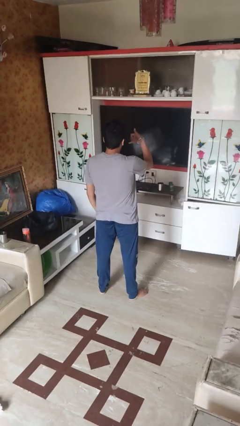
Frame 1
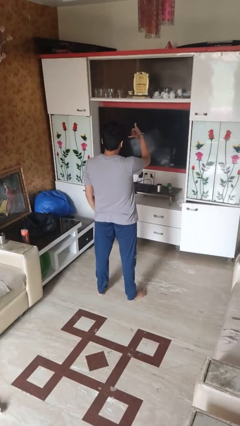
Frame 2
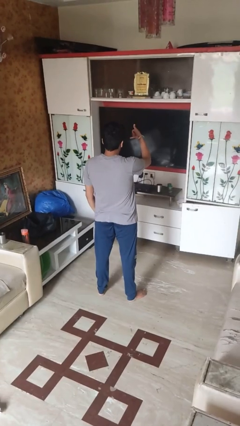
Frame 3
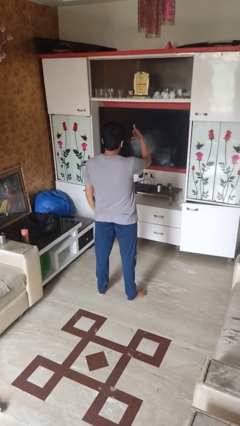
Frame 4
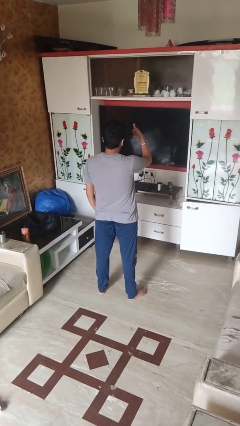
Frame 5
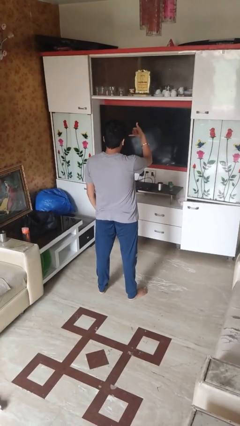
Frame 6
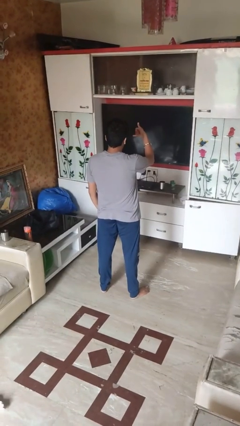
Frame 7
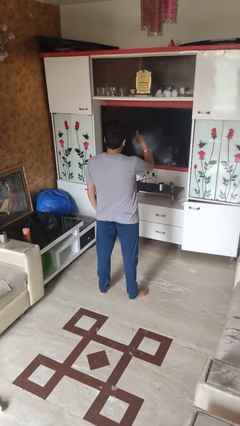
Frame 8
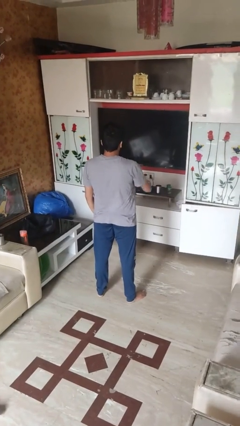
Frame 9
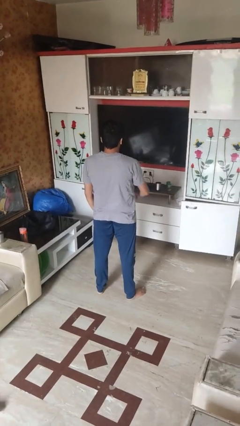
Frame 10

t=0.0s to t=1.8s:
person gestures hang loose

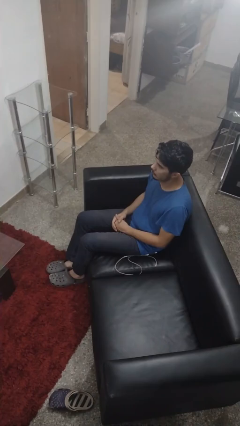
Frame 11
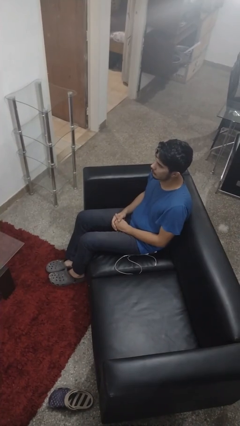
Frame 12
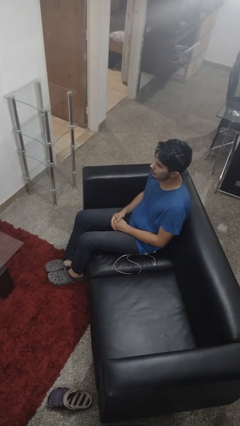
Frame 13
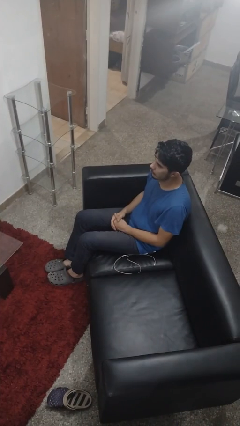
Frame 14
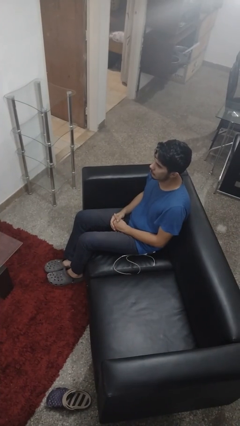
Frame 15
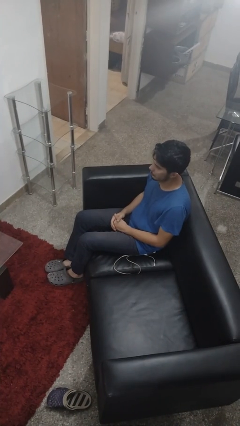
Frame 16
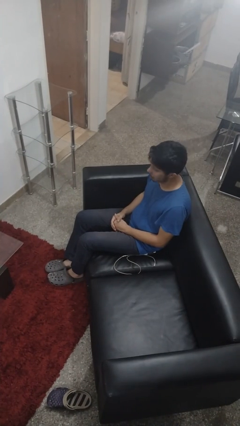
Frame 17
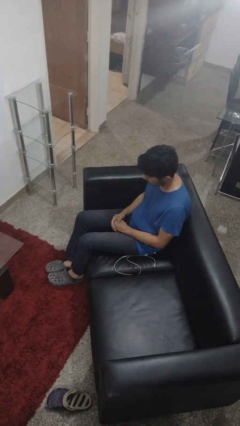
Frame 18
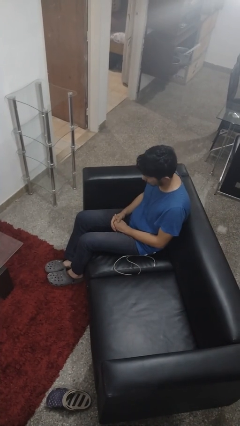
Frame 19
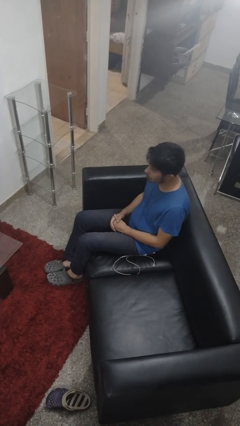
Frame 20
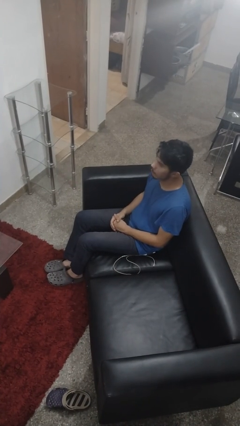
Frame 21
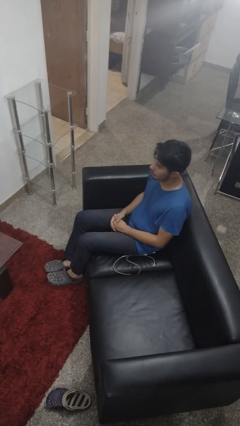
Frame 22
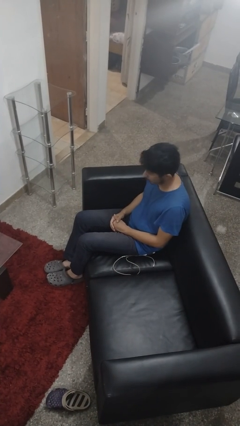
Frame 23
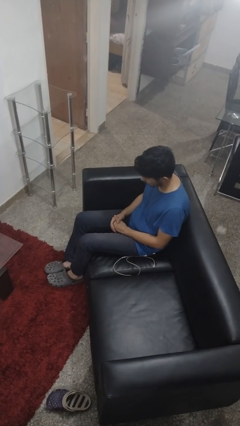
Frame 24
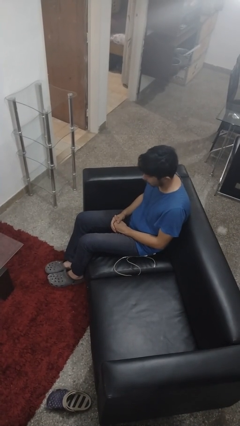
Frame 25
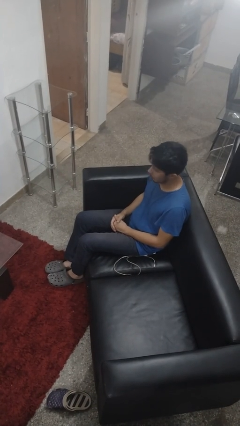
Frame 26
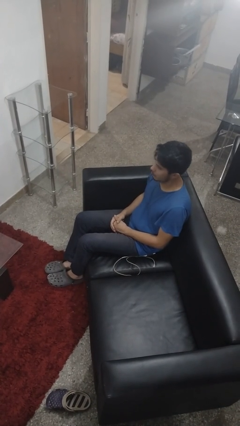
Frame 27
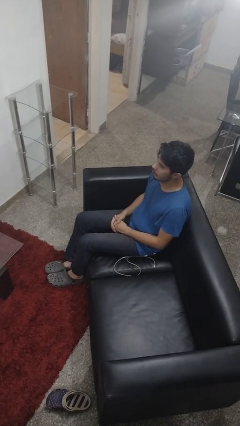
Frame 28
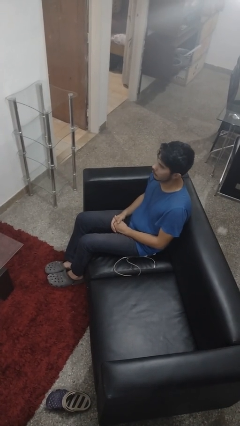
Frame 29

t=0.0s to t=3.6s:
person nods head

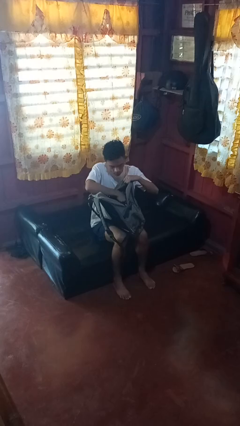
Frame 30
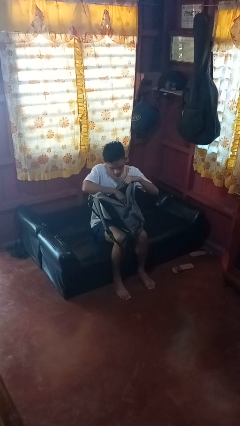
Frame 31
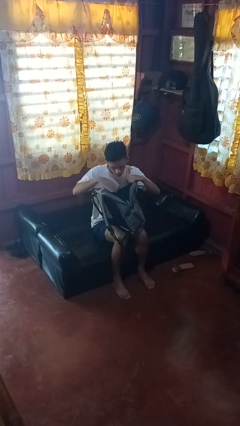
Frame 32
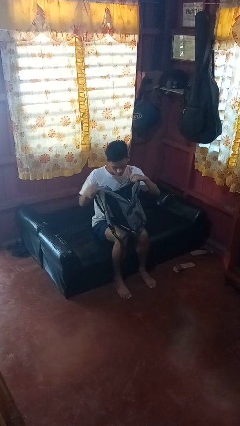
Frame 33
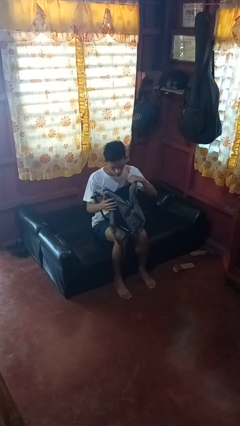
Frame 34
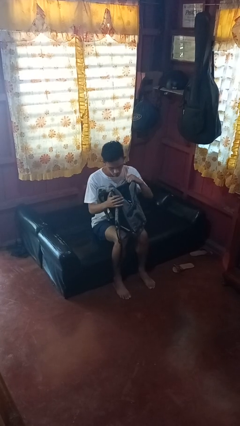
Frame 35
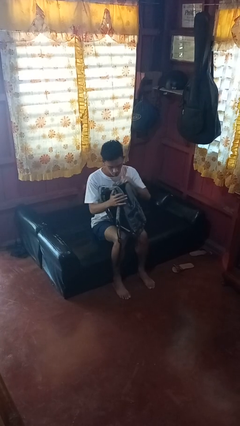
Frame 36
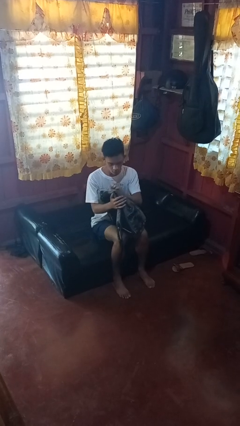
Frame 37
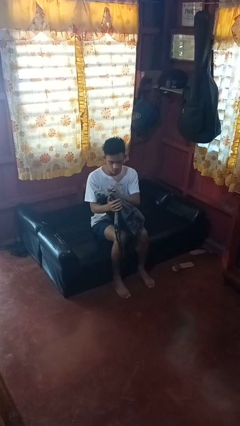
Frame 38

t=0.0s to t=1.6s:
person puts object into backpack

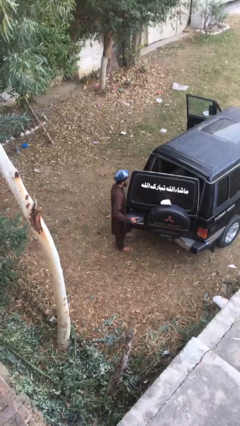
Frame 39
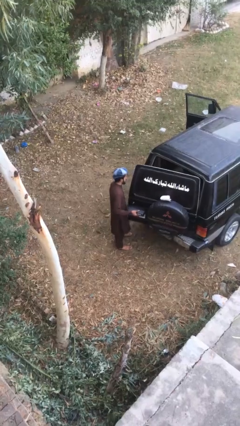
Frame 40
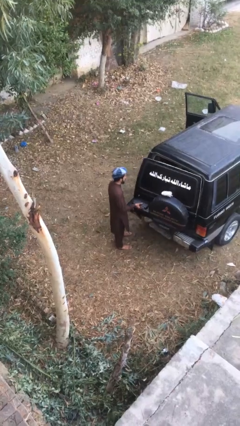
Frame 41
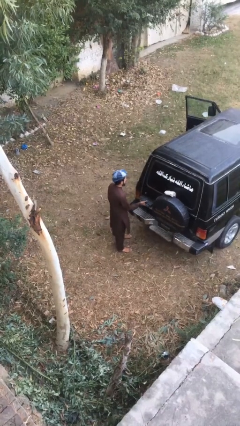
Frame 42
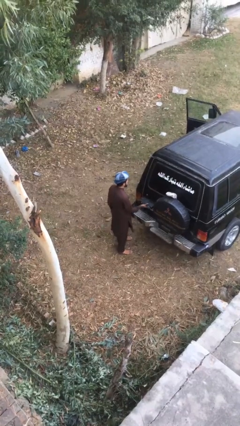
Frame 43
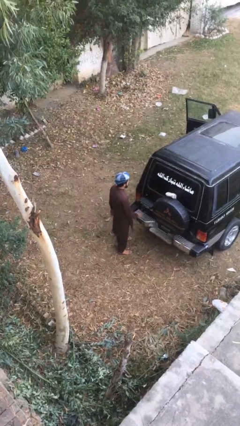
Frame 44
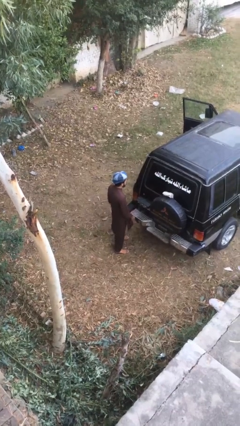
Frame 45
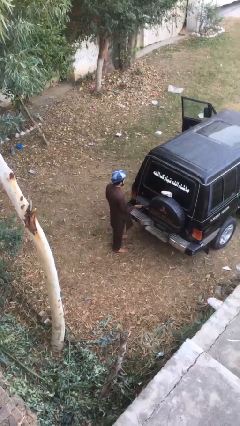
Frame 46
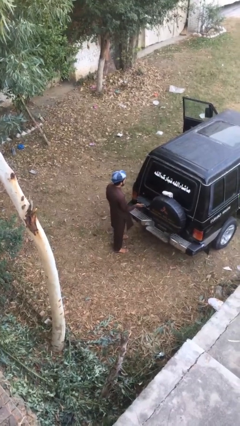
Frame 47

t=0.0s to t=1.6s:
person closes car trunk

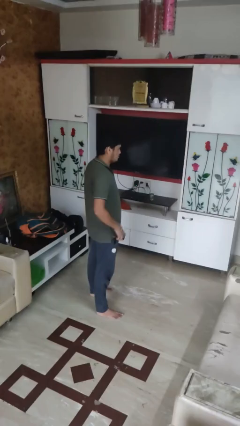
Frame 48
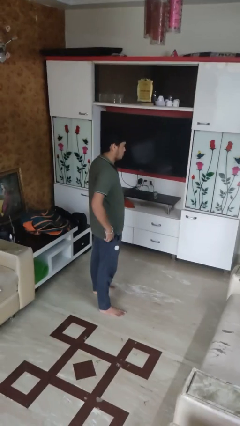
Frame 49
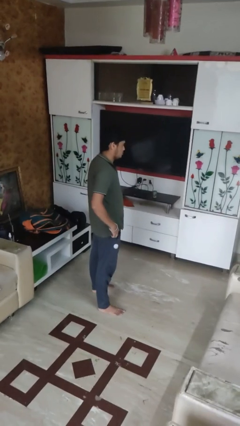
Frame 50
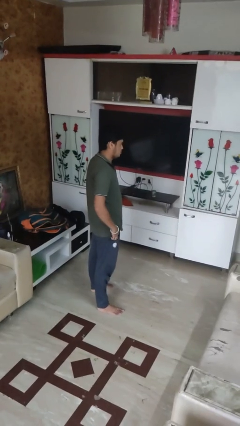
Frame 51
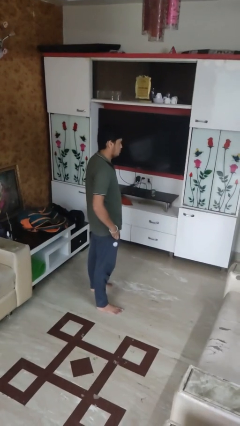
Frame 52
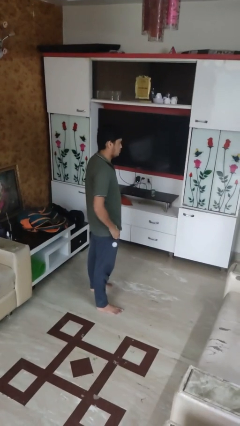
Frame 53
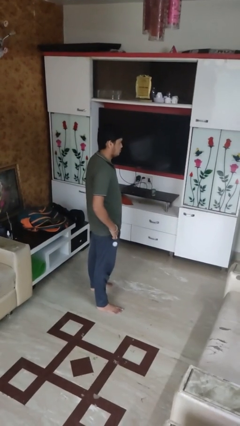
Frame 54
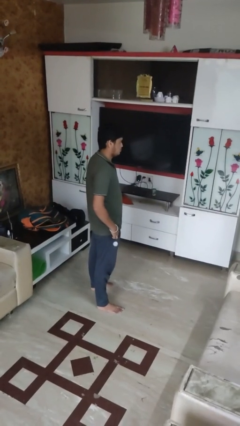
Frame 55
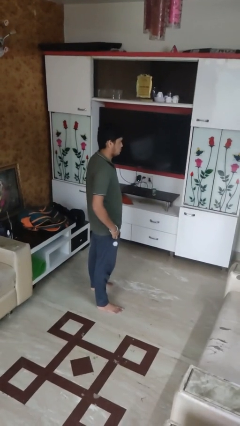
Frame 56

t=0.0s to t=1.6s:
person puts phone into pocket

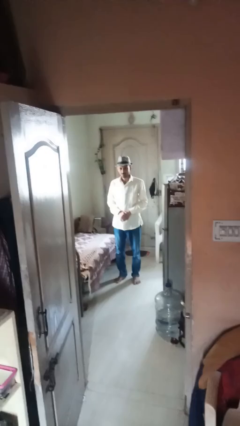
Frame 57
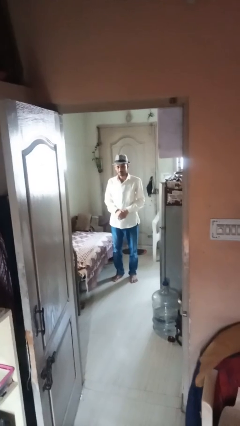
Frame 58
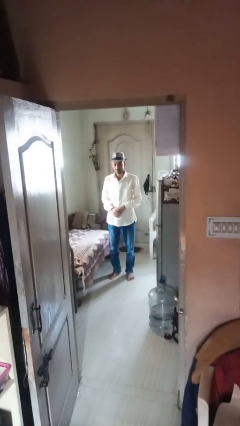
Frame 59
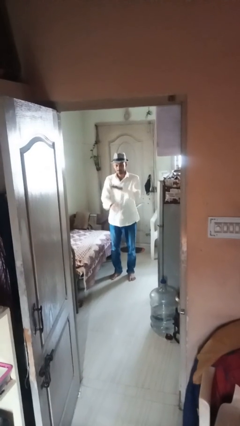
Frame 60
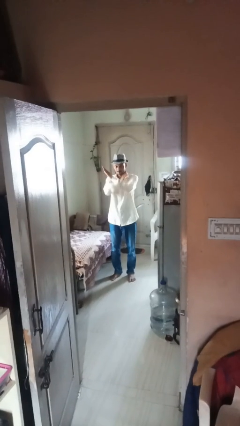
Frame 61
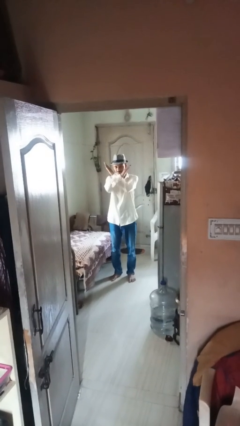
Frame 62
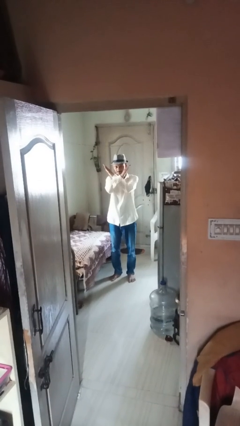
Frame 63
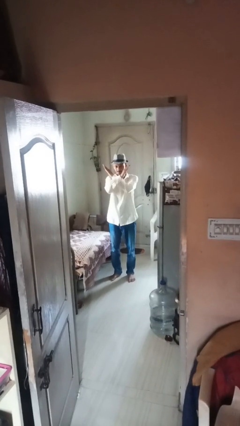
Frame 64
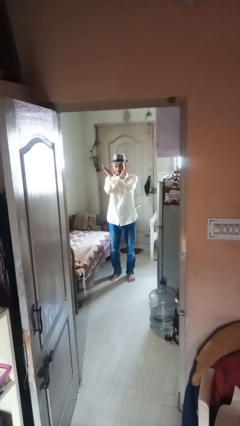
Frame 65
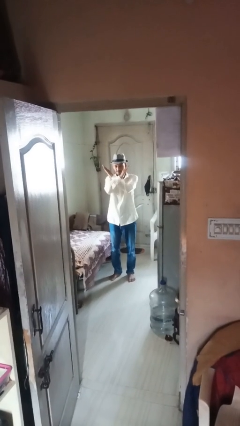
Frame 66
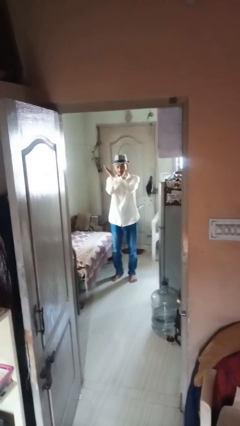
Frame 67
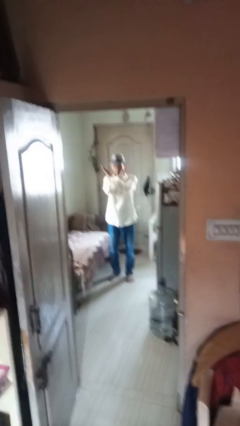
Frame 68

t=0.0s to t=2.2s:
person gestures arms x

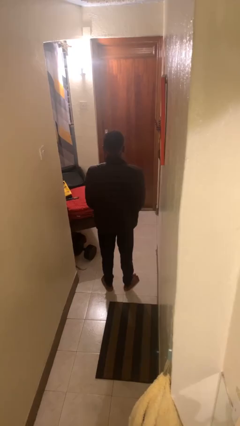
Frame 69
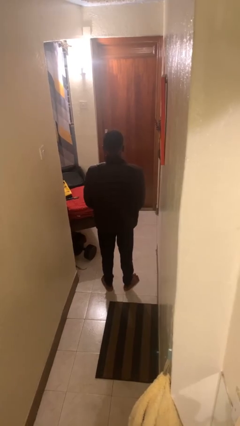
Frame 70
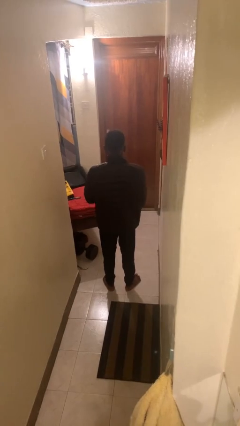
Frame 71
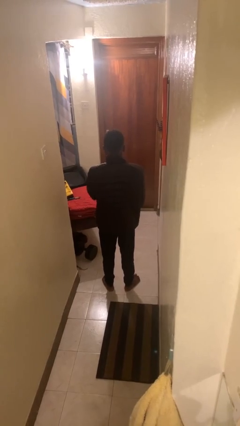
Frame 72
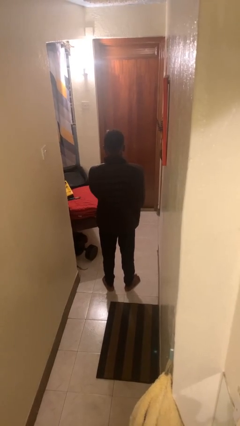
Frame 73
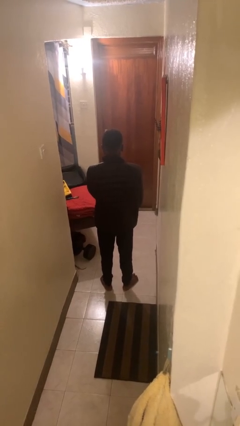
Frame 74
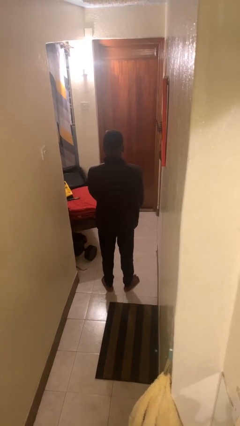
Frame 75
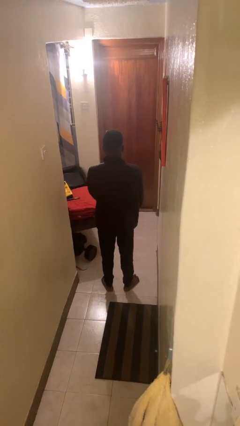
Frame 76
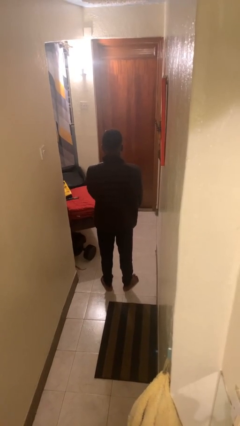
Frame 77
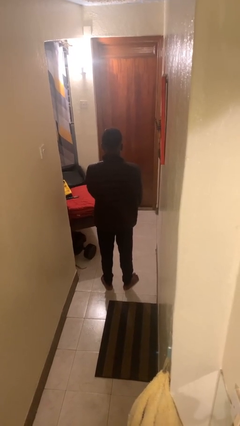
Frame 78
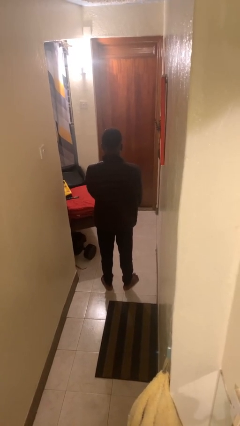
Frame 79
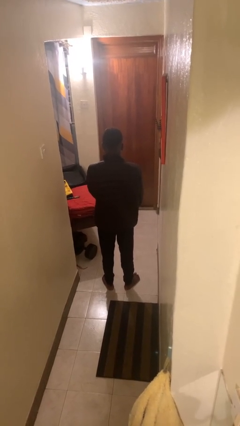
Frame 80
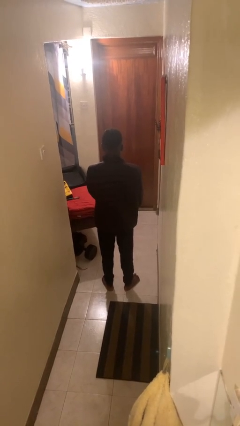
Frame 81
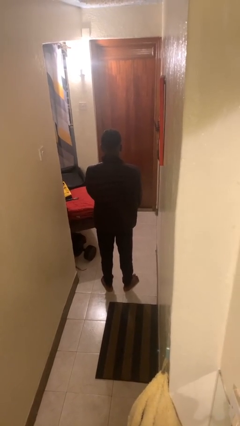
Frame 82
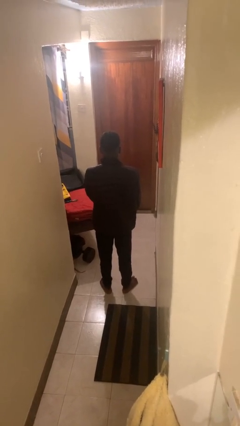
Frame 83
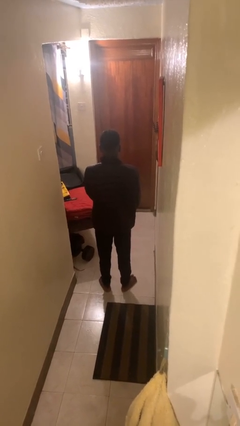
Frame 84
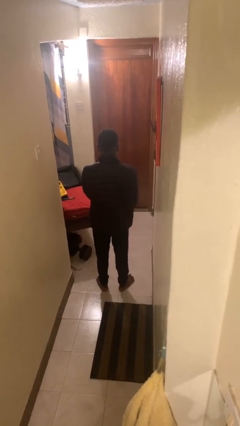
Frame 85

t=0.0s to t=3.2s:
person zips up jacket

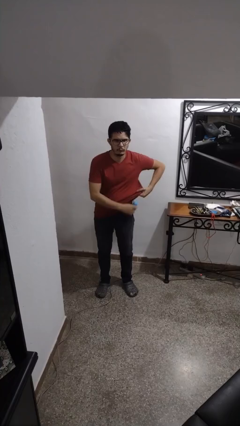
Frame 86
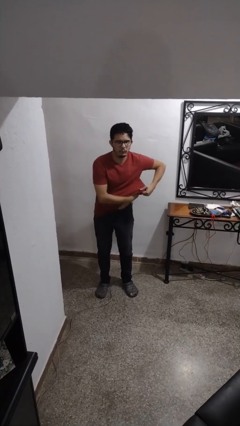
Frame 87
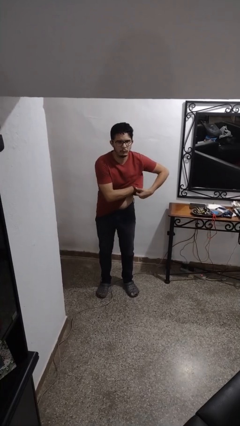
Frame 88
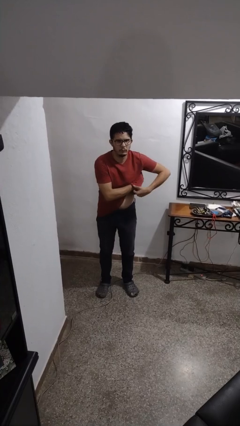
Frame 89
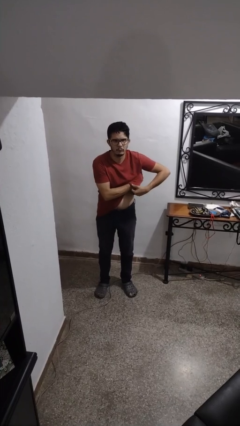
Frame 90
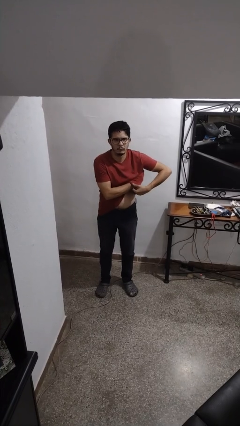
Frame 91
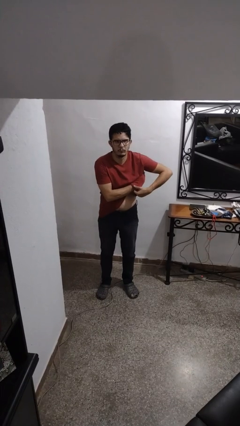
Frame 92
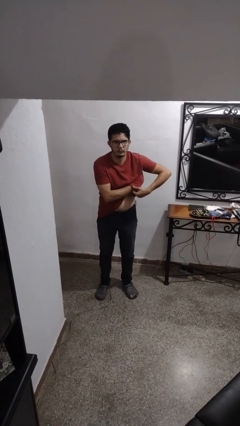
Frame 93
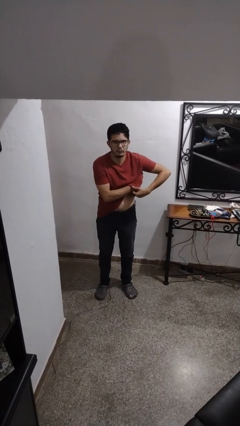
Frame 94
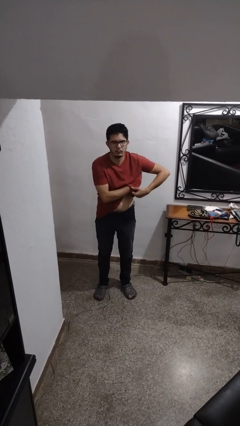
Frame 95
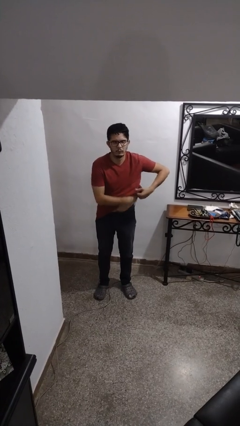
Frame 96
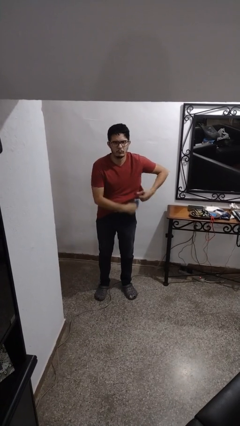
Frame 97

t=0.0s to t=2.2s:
person applies deodorant
